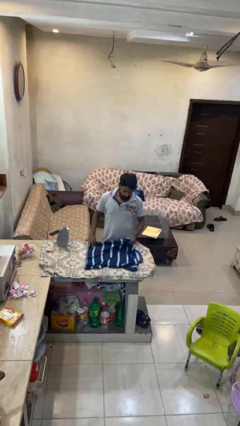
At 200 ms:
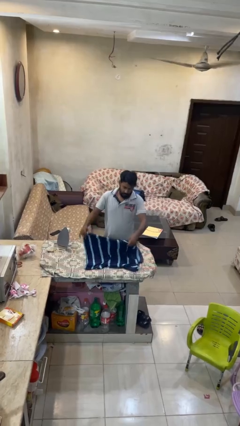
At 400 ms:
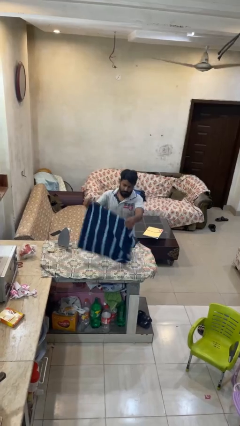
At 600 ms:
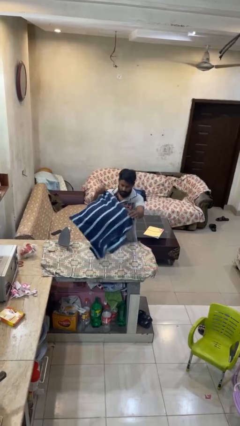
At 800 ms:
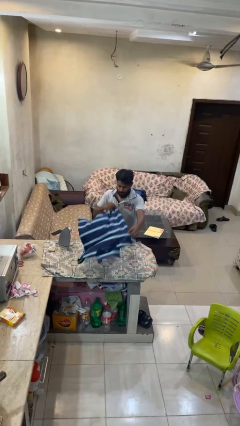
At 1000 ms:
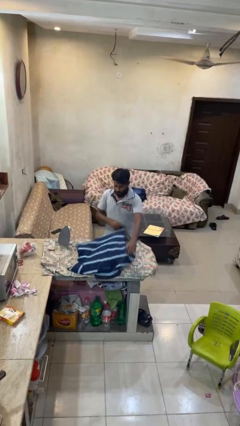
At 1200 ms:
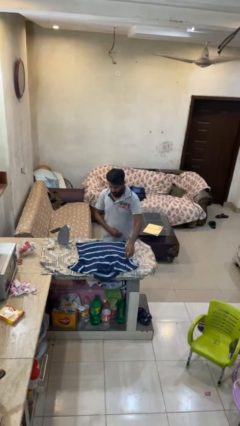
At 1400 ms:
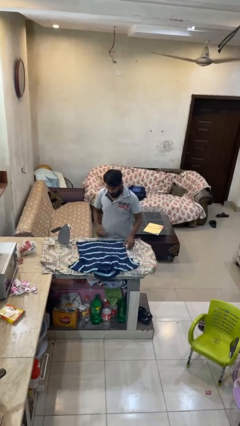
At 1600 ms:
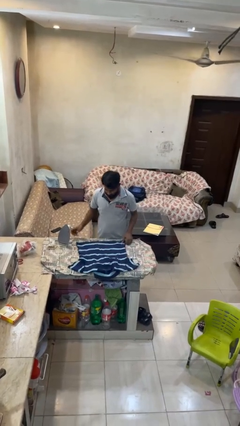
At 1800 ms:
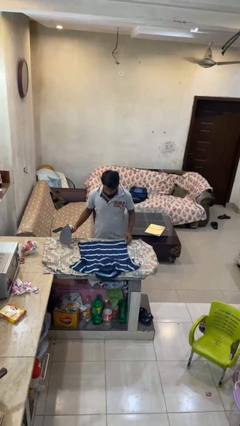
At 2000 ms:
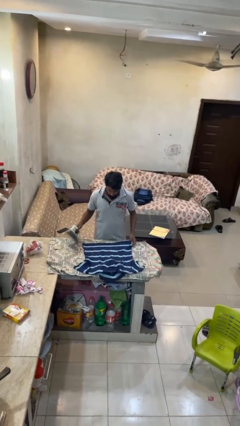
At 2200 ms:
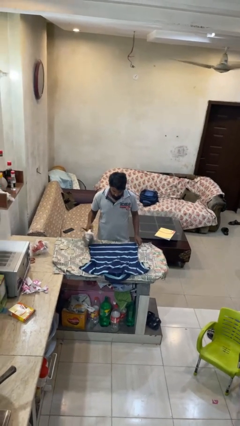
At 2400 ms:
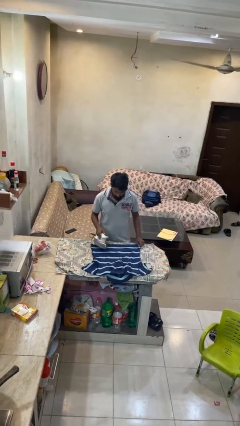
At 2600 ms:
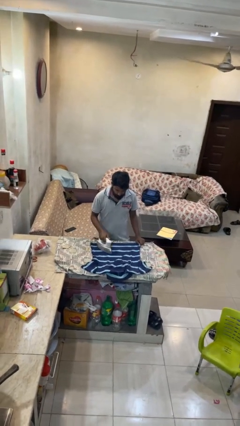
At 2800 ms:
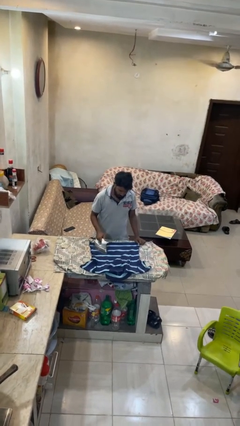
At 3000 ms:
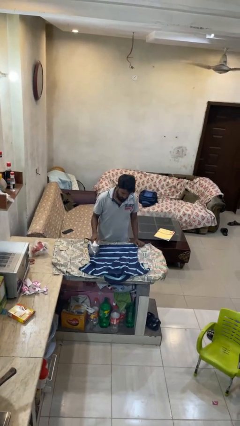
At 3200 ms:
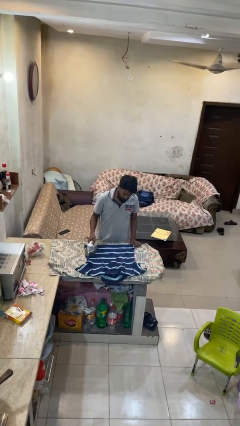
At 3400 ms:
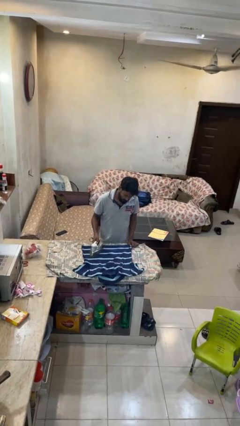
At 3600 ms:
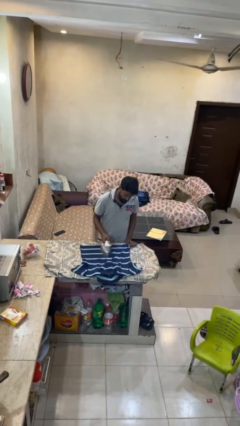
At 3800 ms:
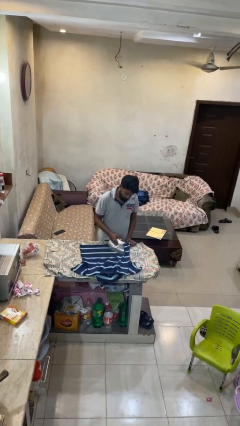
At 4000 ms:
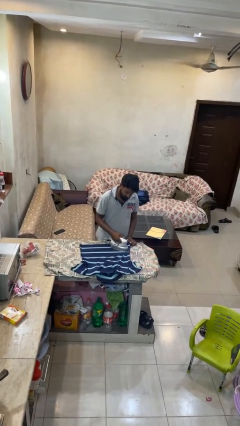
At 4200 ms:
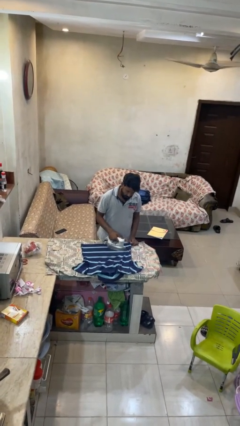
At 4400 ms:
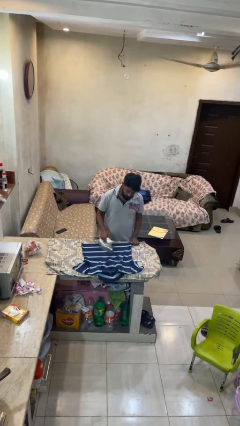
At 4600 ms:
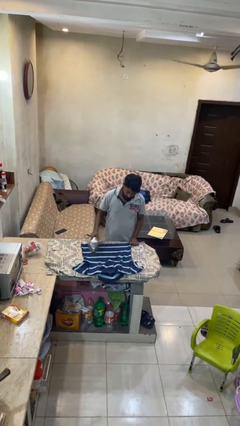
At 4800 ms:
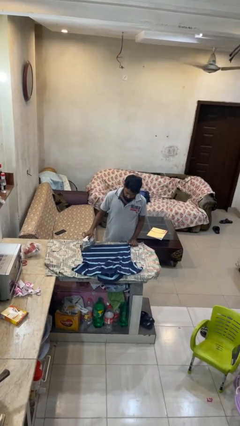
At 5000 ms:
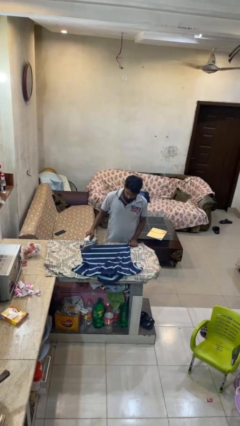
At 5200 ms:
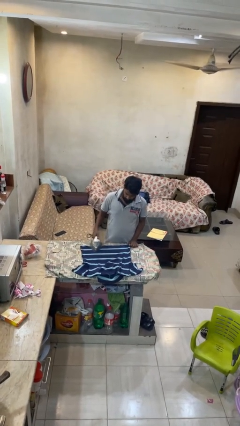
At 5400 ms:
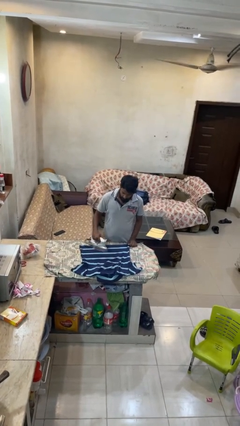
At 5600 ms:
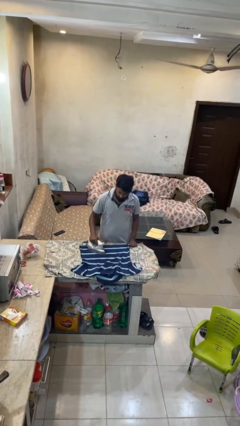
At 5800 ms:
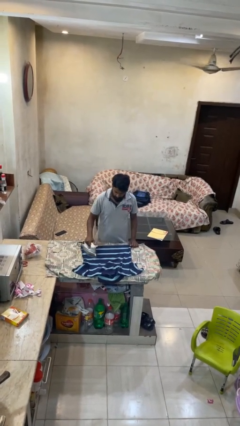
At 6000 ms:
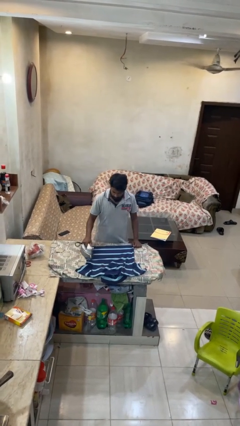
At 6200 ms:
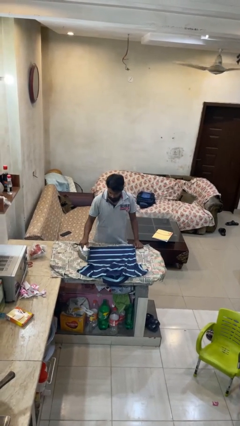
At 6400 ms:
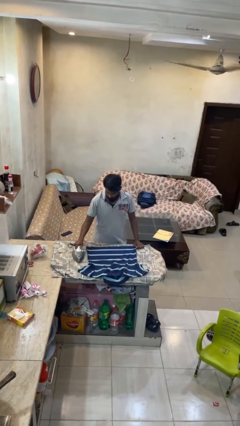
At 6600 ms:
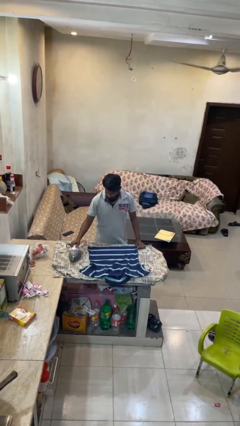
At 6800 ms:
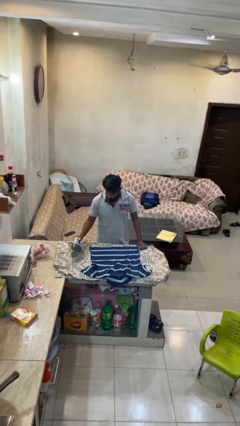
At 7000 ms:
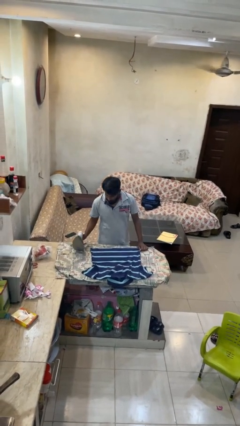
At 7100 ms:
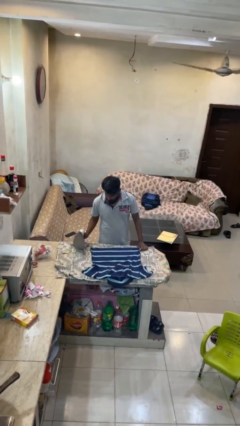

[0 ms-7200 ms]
person irons clothes

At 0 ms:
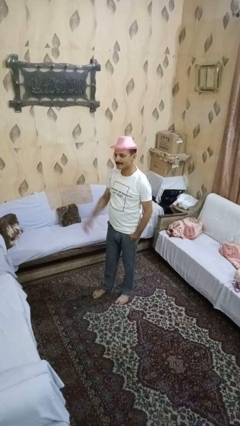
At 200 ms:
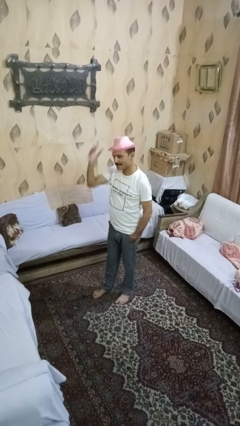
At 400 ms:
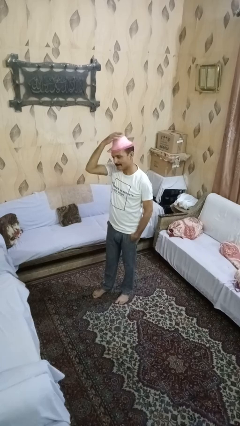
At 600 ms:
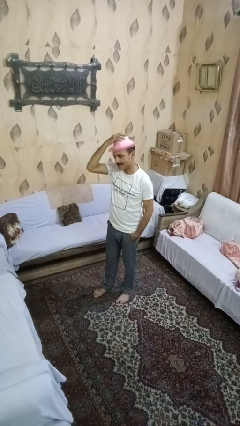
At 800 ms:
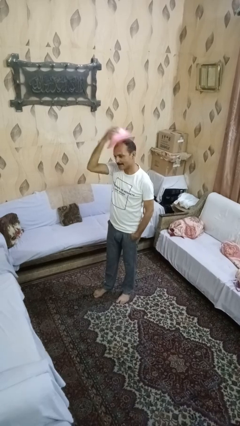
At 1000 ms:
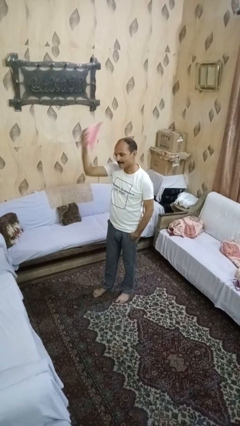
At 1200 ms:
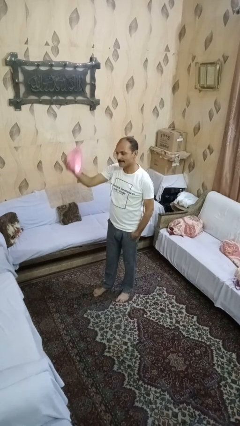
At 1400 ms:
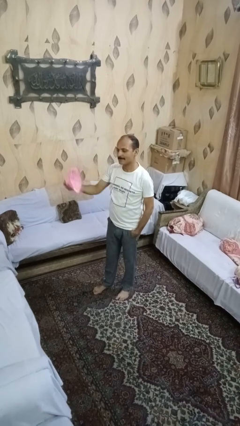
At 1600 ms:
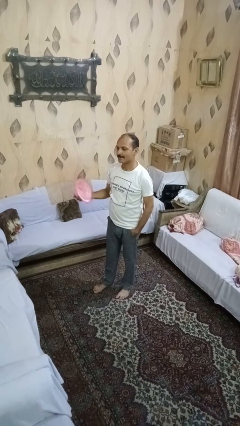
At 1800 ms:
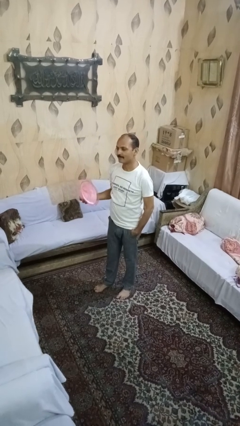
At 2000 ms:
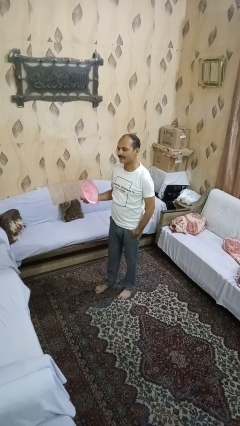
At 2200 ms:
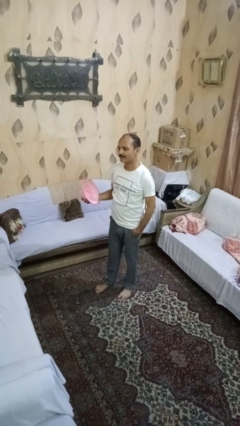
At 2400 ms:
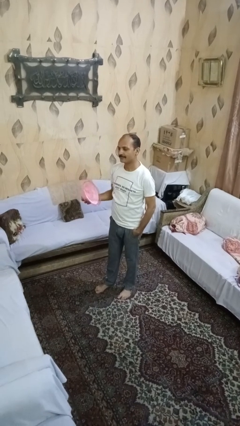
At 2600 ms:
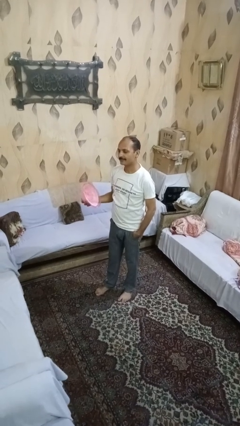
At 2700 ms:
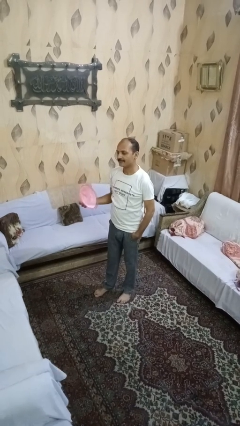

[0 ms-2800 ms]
person takes off hat

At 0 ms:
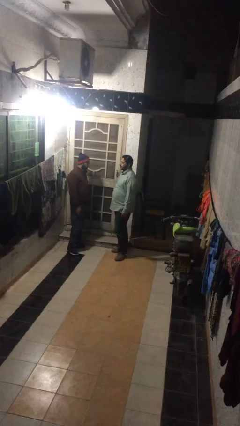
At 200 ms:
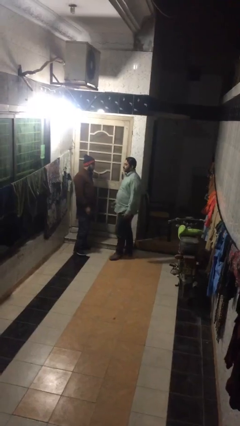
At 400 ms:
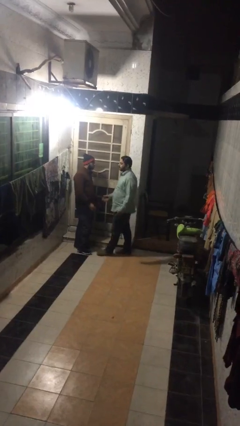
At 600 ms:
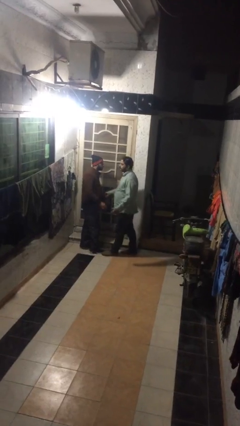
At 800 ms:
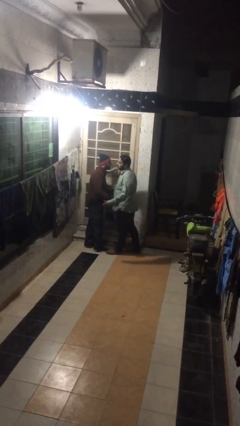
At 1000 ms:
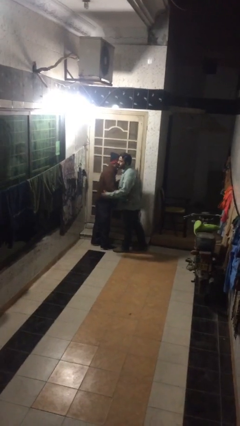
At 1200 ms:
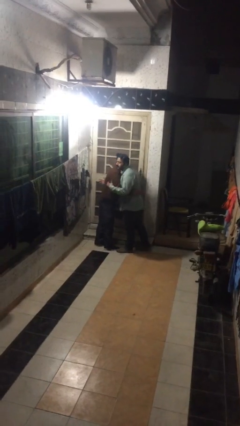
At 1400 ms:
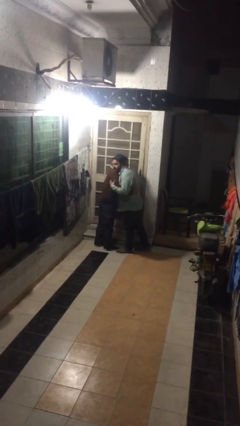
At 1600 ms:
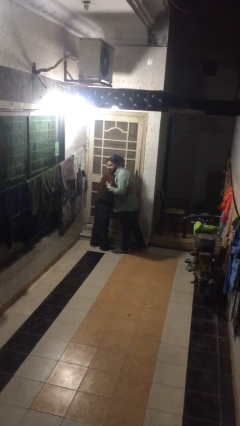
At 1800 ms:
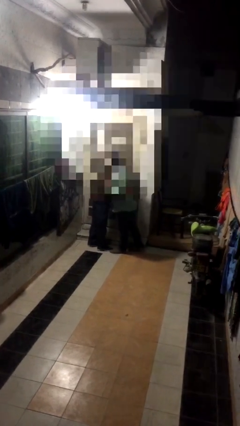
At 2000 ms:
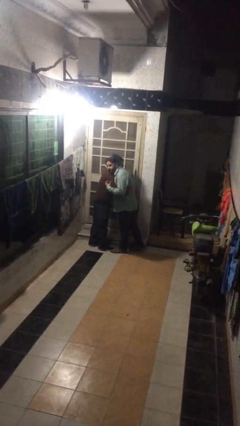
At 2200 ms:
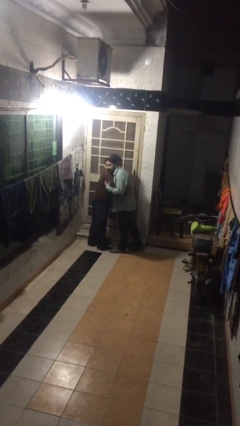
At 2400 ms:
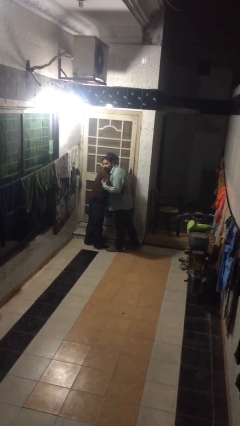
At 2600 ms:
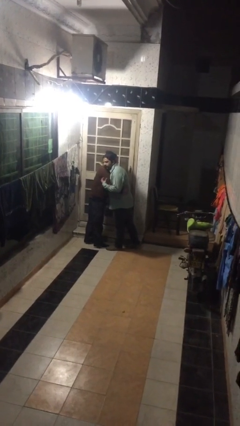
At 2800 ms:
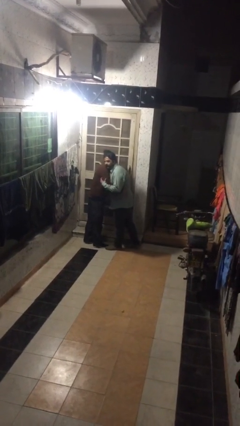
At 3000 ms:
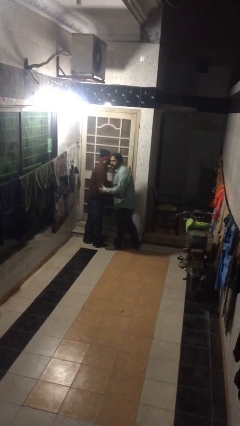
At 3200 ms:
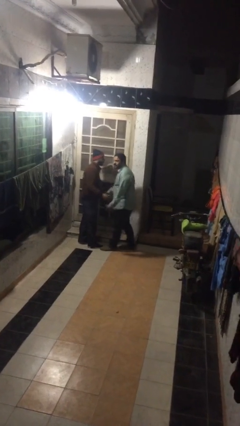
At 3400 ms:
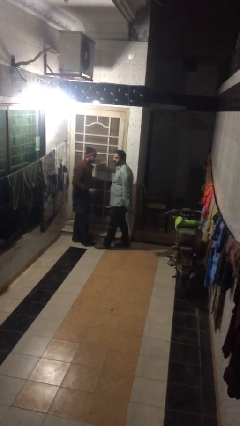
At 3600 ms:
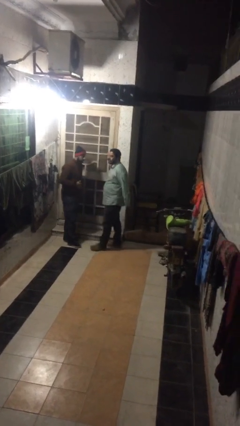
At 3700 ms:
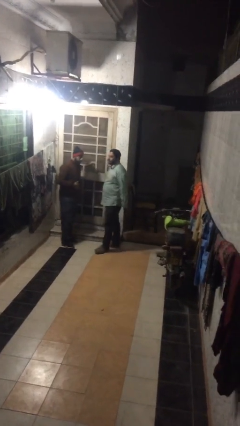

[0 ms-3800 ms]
person embraces person

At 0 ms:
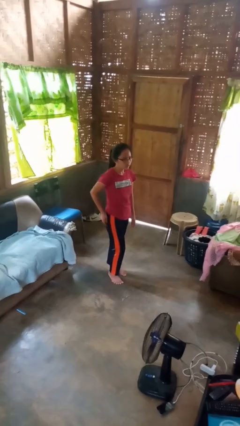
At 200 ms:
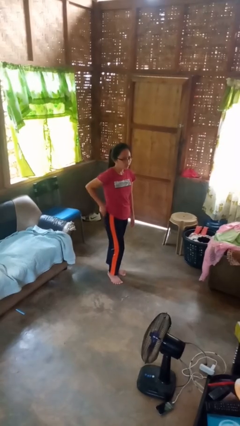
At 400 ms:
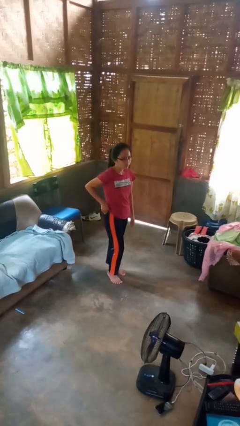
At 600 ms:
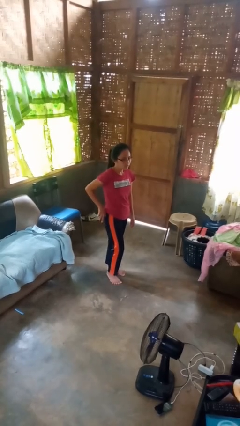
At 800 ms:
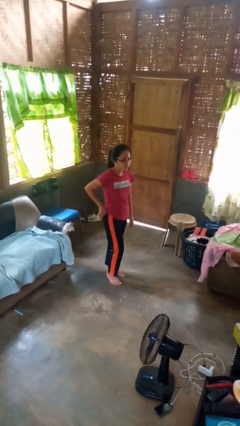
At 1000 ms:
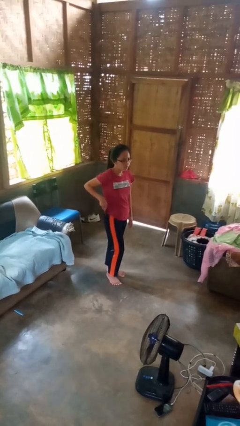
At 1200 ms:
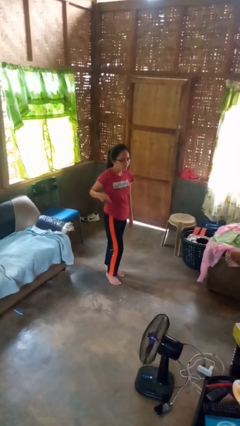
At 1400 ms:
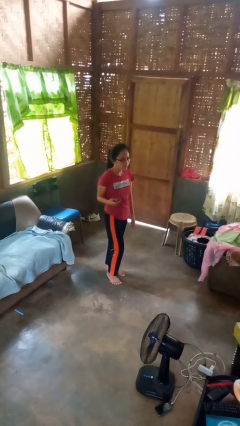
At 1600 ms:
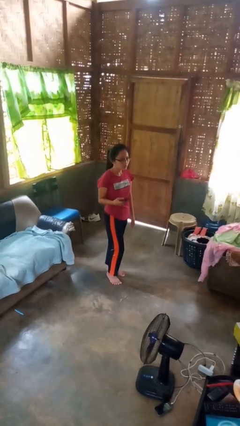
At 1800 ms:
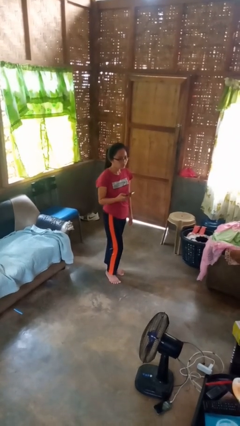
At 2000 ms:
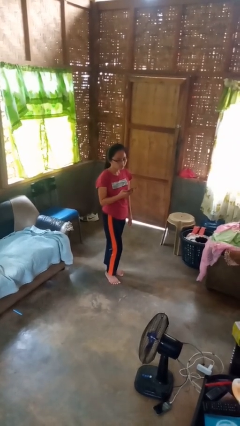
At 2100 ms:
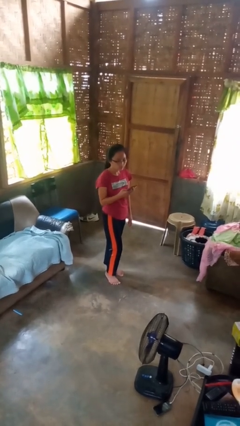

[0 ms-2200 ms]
person takes phone from pocket

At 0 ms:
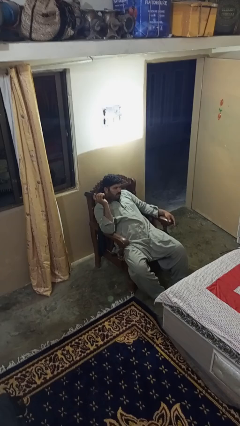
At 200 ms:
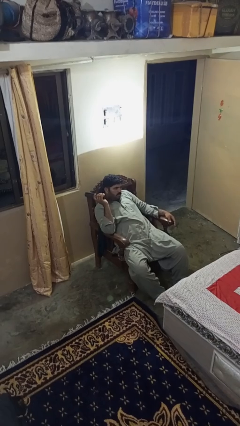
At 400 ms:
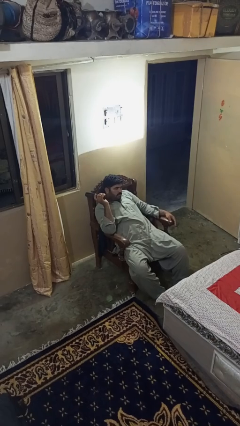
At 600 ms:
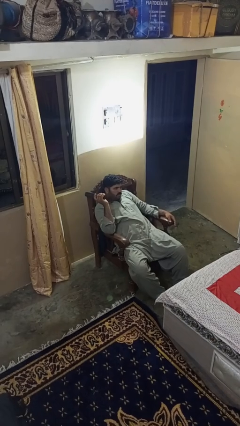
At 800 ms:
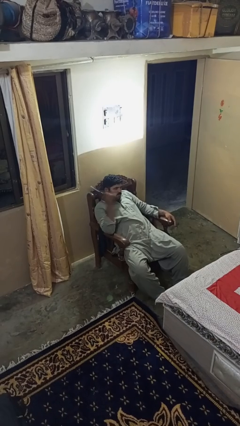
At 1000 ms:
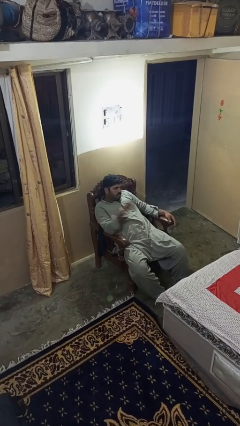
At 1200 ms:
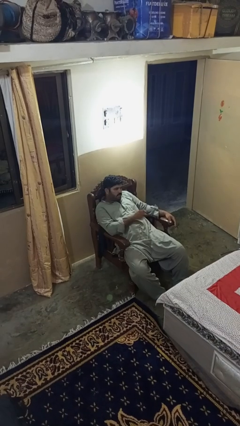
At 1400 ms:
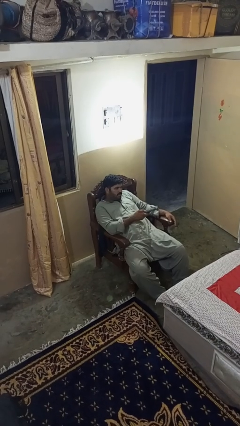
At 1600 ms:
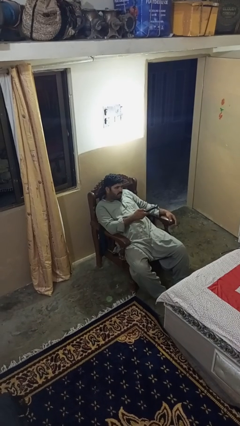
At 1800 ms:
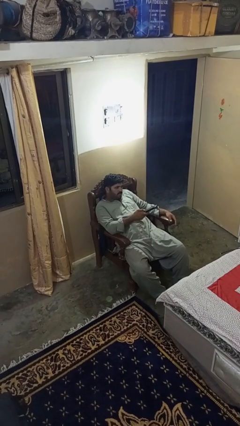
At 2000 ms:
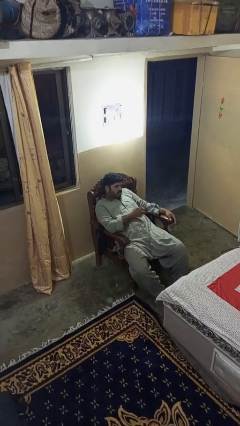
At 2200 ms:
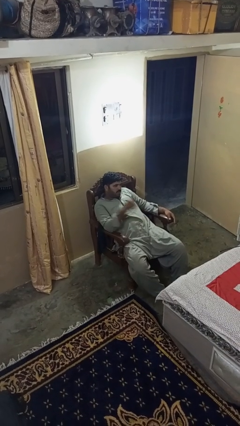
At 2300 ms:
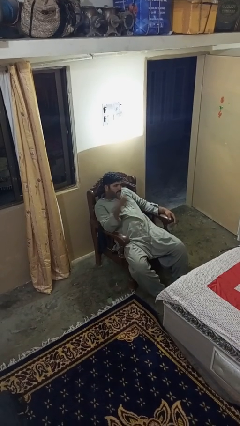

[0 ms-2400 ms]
person uses television remote
